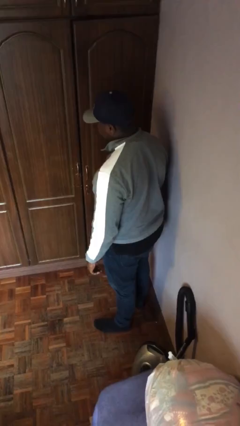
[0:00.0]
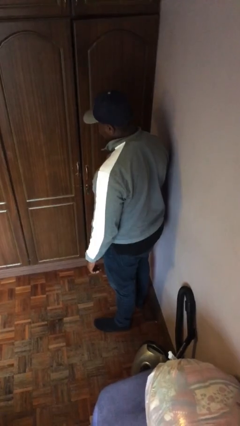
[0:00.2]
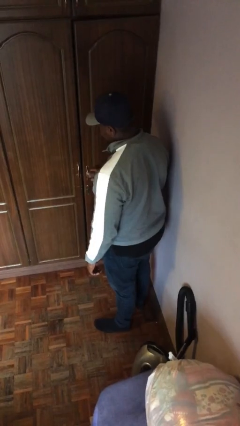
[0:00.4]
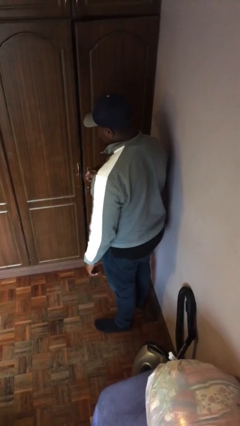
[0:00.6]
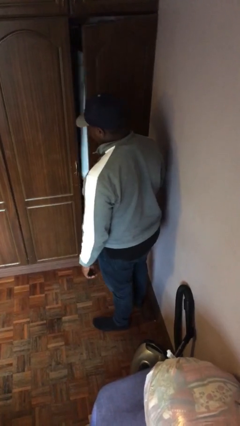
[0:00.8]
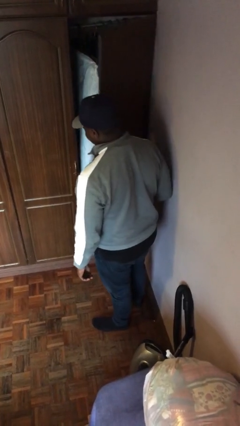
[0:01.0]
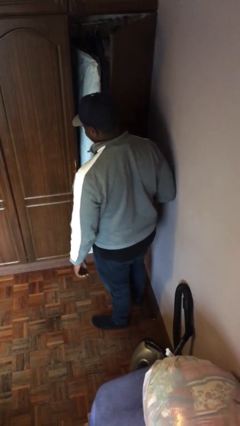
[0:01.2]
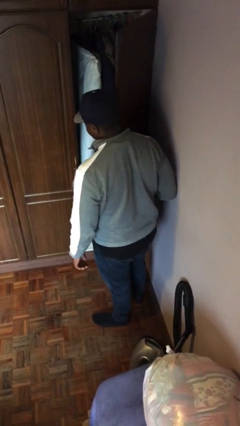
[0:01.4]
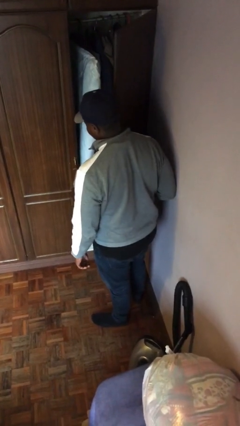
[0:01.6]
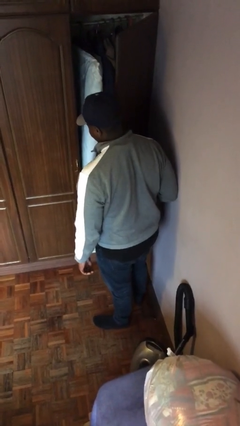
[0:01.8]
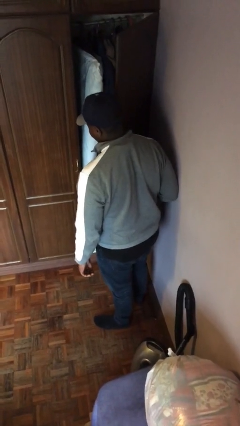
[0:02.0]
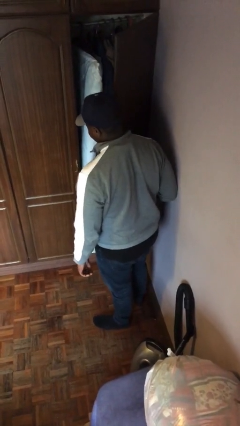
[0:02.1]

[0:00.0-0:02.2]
person opens closet door

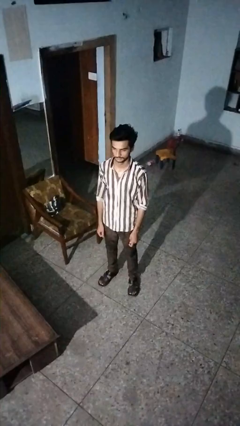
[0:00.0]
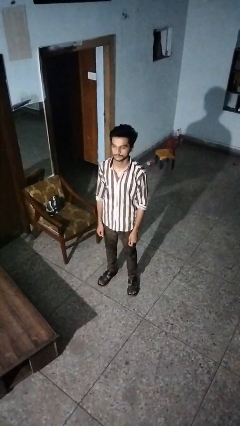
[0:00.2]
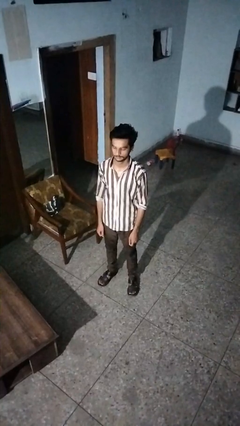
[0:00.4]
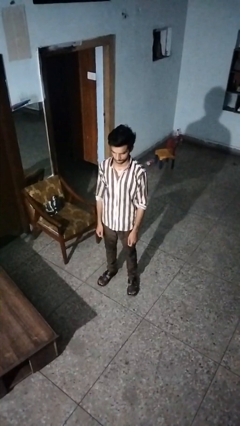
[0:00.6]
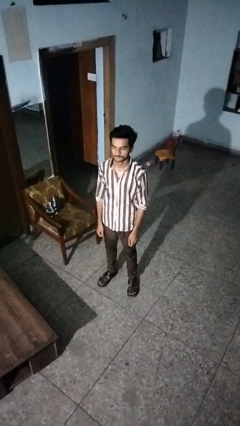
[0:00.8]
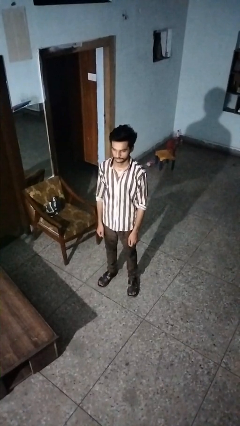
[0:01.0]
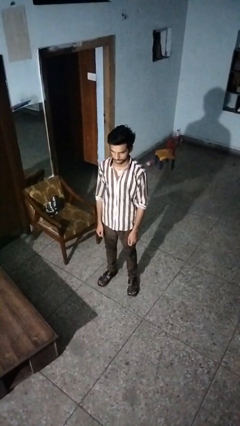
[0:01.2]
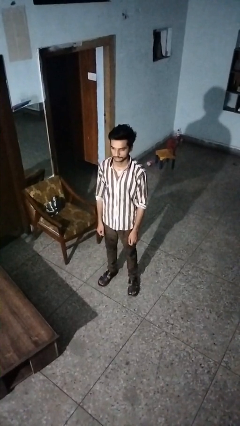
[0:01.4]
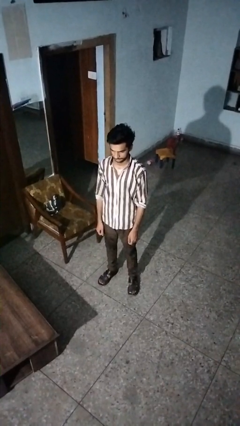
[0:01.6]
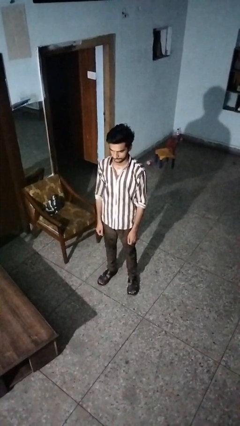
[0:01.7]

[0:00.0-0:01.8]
person nods head

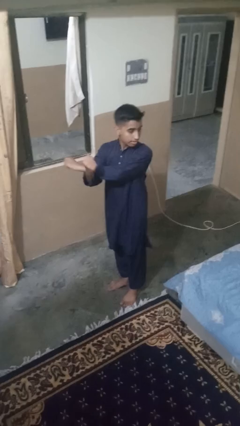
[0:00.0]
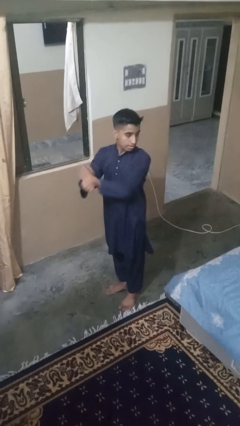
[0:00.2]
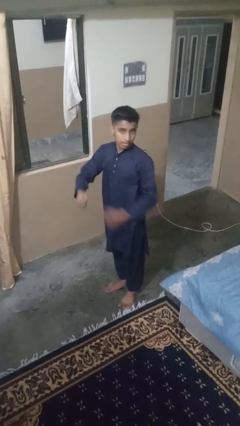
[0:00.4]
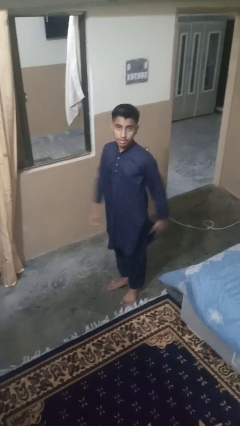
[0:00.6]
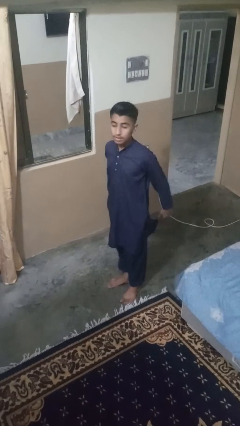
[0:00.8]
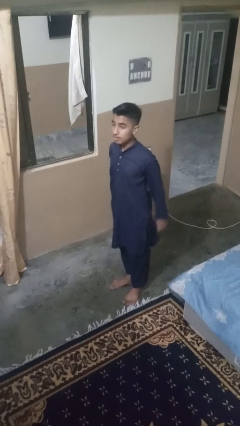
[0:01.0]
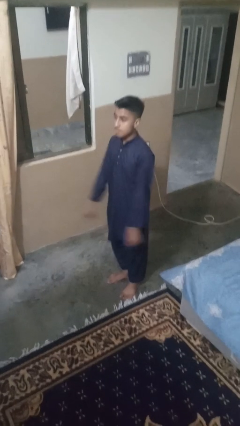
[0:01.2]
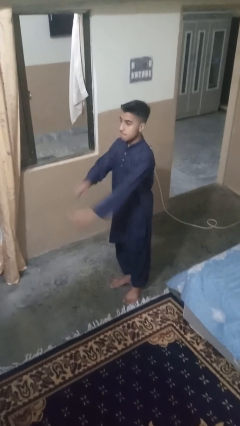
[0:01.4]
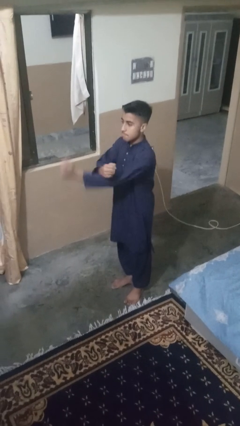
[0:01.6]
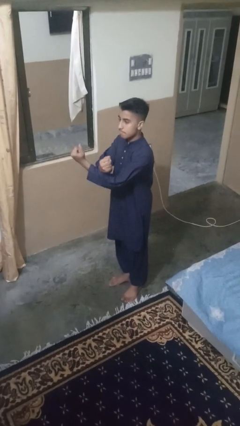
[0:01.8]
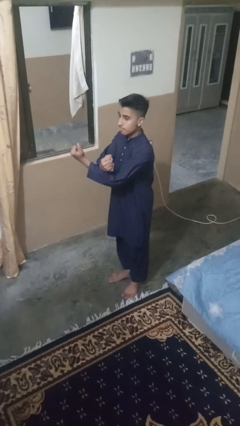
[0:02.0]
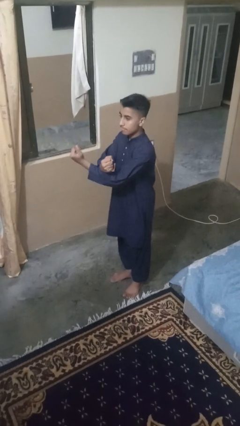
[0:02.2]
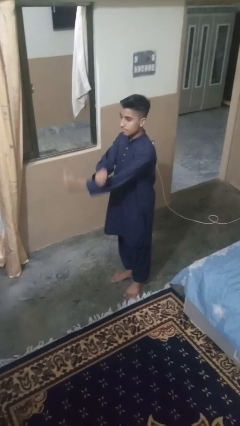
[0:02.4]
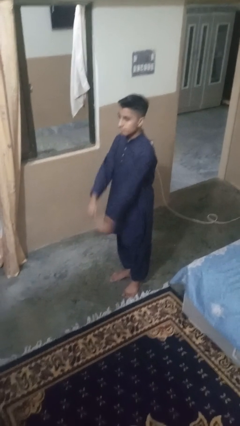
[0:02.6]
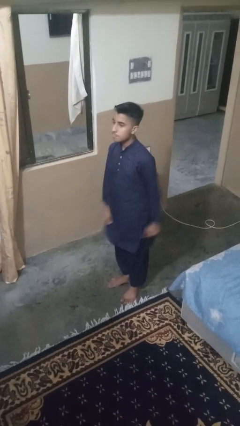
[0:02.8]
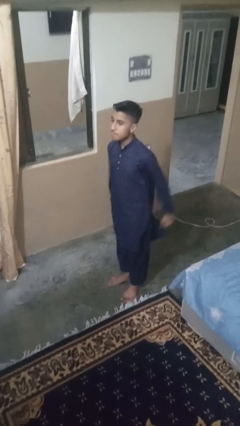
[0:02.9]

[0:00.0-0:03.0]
person crosses arms

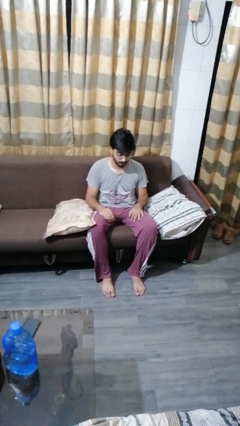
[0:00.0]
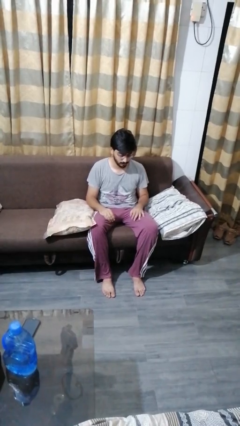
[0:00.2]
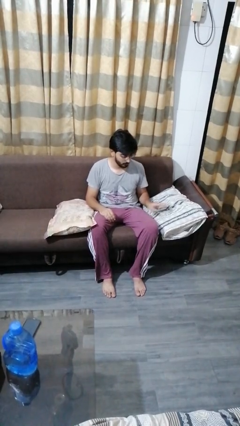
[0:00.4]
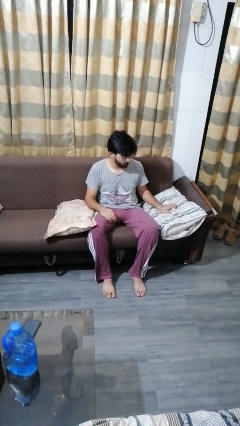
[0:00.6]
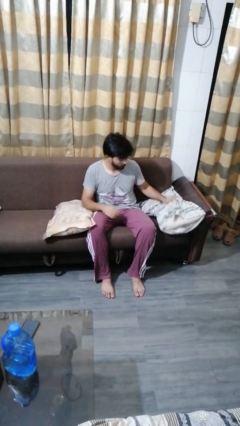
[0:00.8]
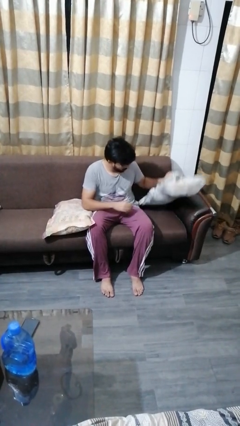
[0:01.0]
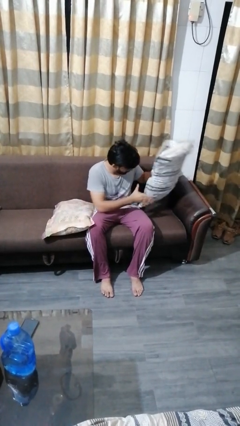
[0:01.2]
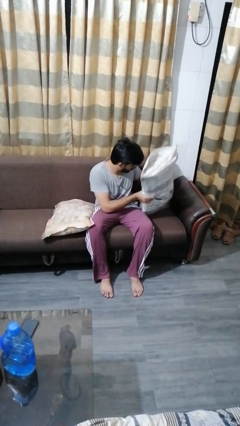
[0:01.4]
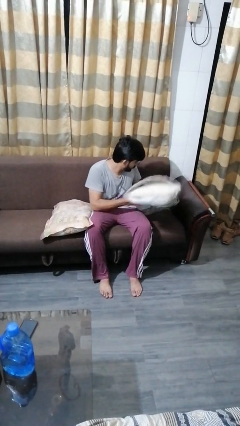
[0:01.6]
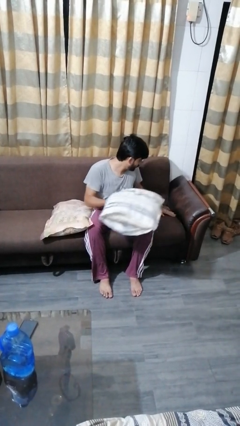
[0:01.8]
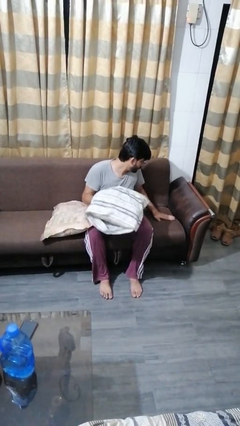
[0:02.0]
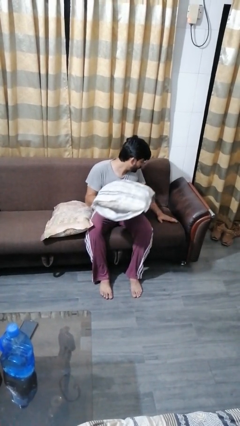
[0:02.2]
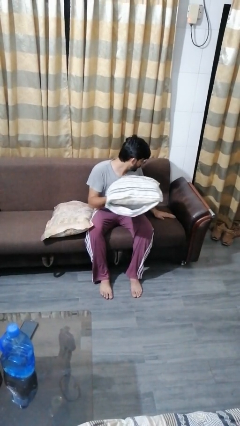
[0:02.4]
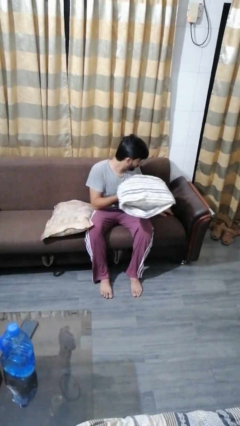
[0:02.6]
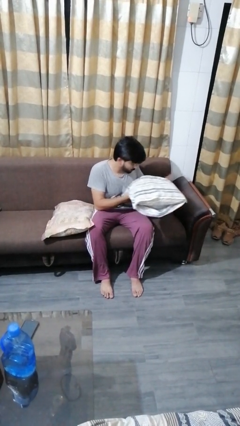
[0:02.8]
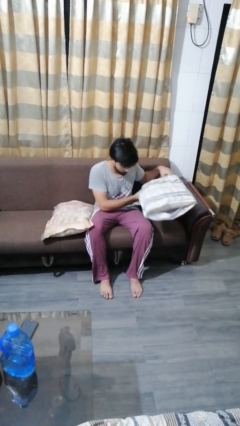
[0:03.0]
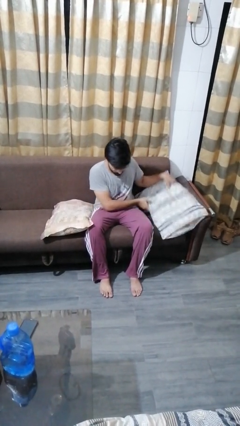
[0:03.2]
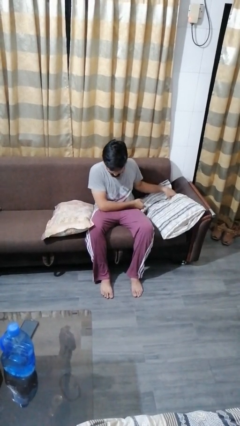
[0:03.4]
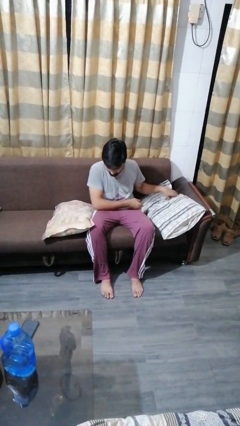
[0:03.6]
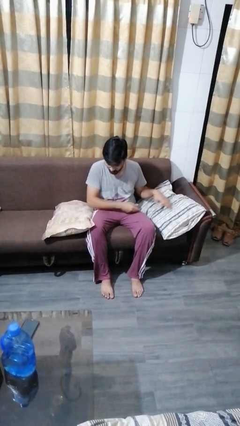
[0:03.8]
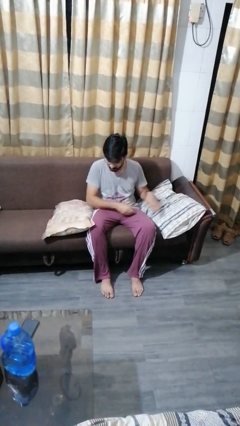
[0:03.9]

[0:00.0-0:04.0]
person searches in couch

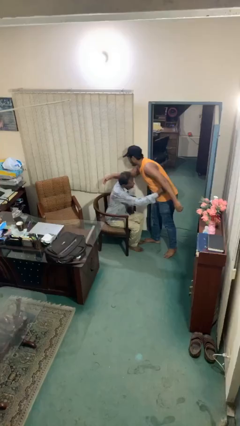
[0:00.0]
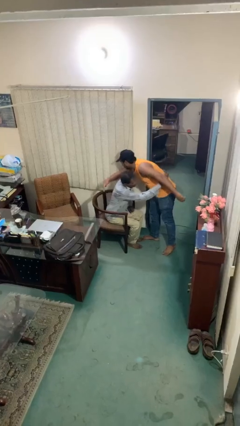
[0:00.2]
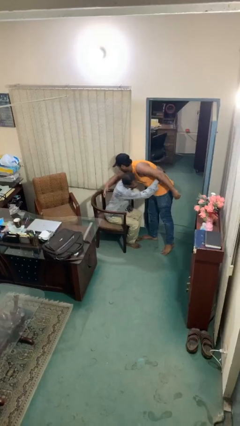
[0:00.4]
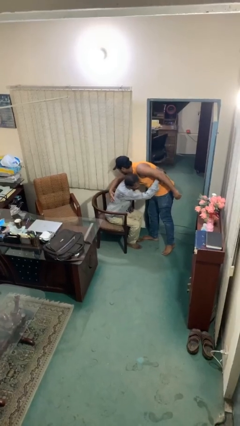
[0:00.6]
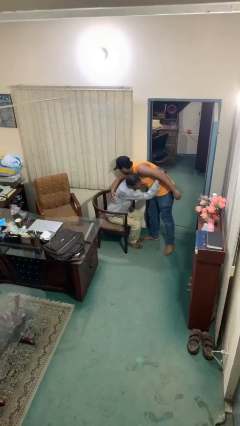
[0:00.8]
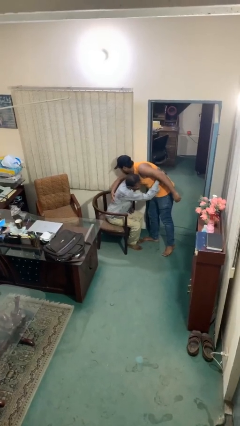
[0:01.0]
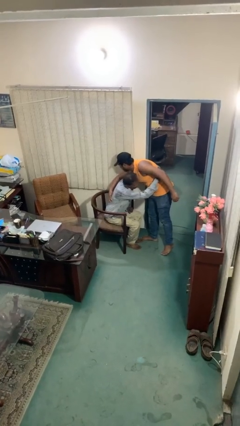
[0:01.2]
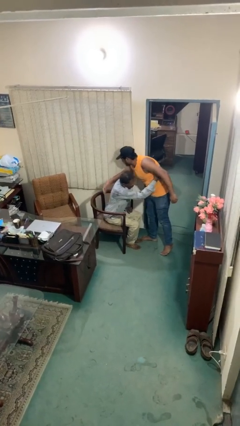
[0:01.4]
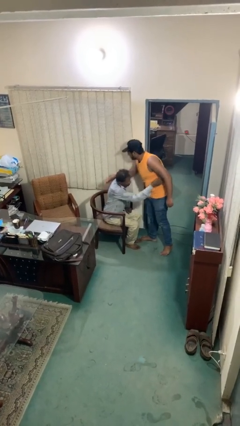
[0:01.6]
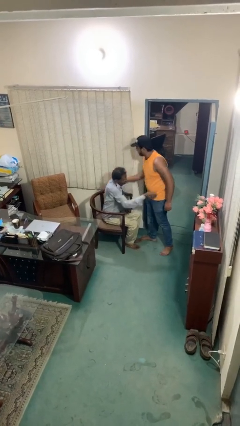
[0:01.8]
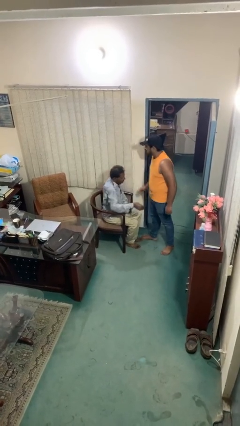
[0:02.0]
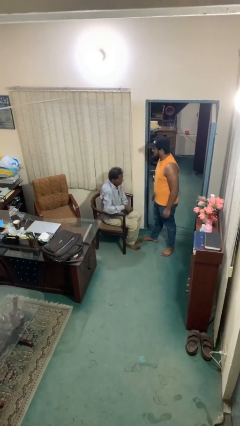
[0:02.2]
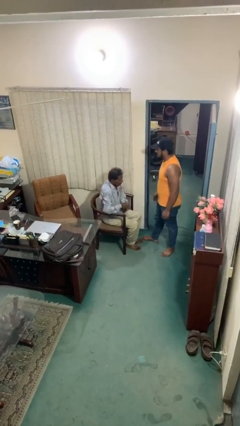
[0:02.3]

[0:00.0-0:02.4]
person embraces person

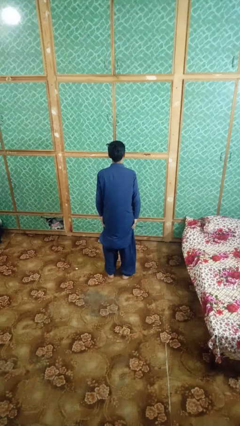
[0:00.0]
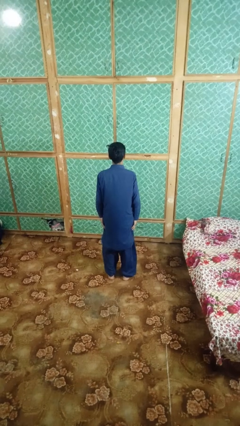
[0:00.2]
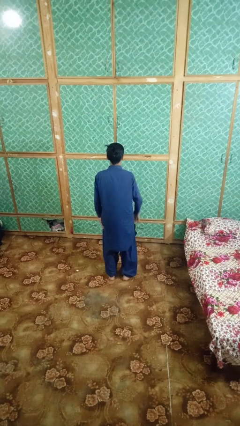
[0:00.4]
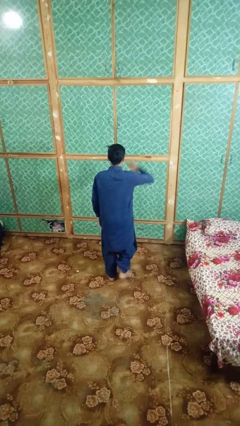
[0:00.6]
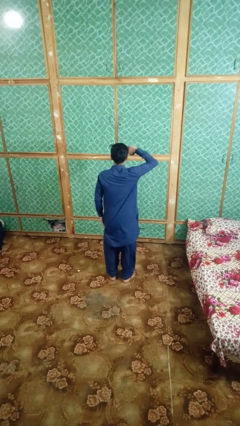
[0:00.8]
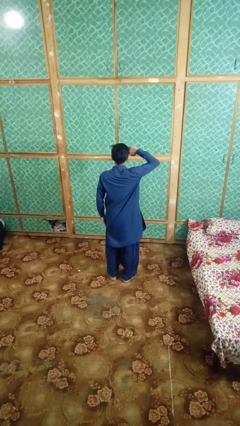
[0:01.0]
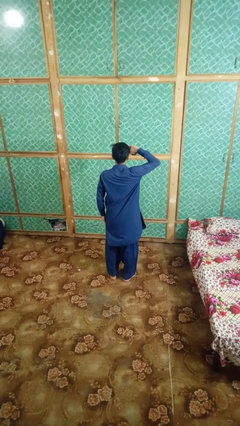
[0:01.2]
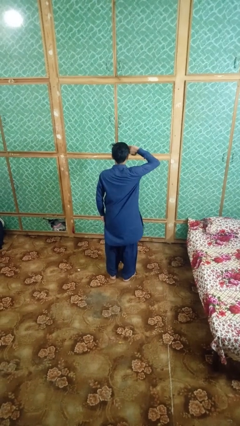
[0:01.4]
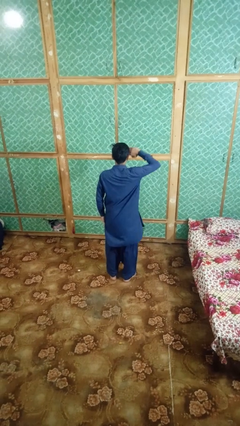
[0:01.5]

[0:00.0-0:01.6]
person salutes

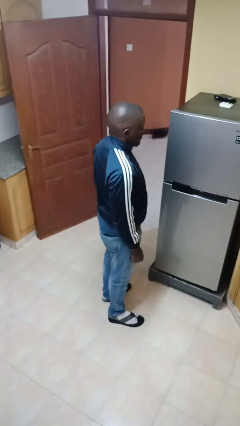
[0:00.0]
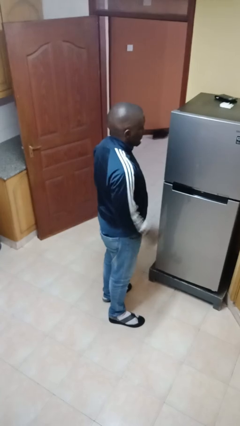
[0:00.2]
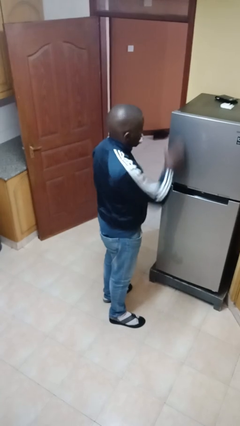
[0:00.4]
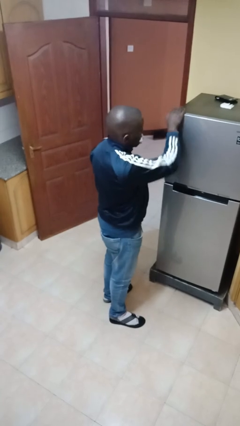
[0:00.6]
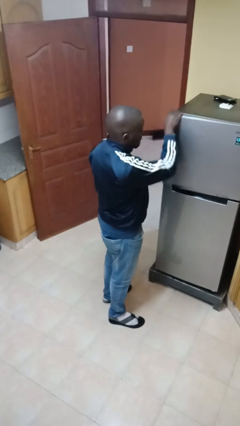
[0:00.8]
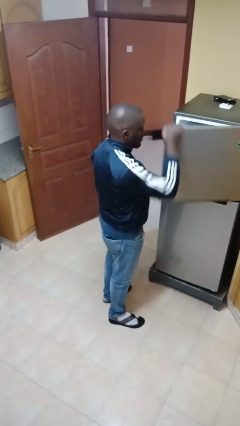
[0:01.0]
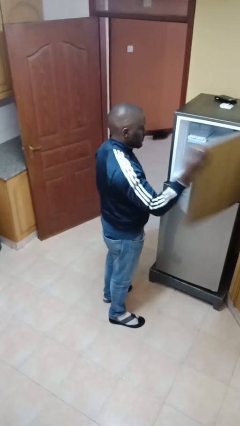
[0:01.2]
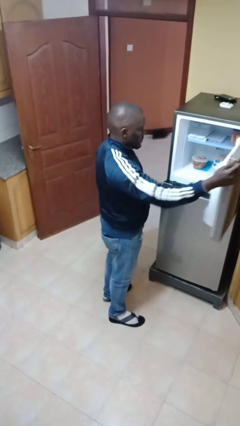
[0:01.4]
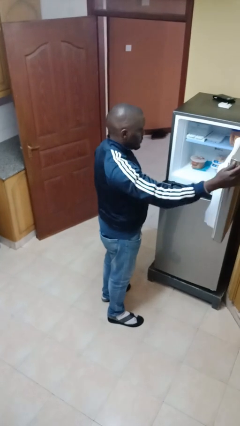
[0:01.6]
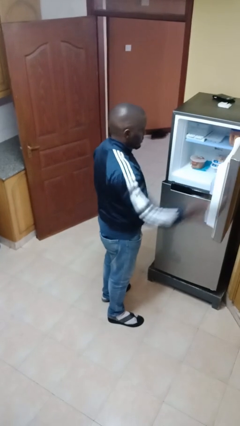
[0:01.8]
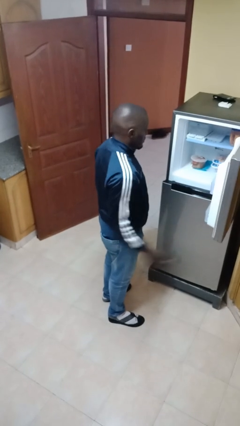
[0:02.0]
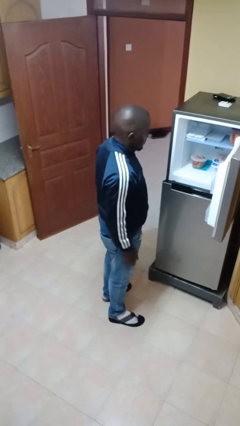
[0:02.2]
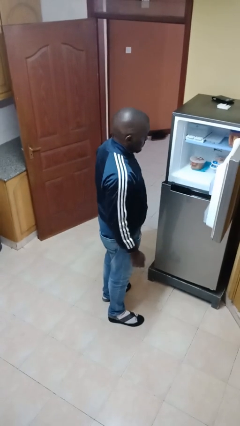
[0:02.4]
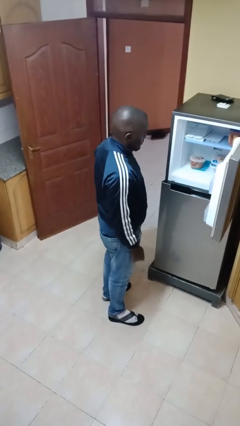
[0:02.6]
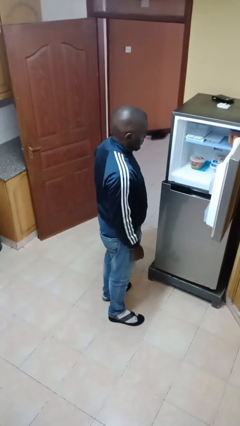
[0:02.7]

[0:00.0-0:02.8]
person opens refrigerator
